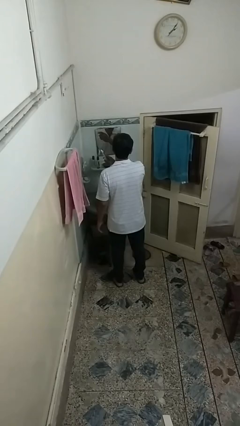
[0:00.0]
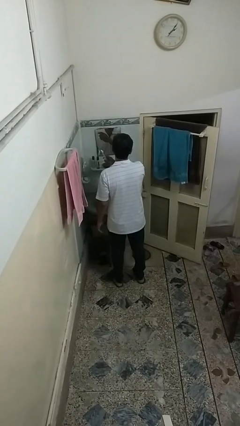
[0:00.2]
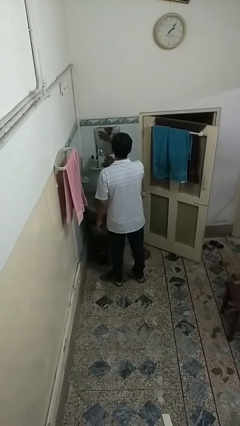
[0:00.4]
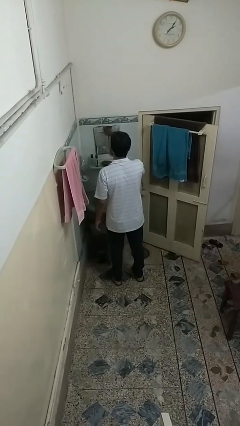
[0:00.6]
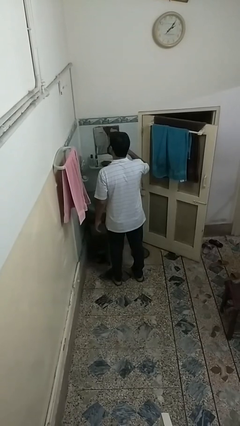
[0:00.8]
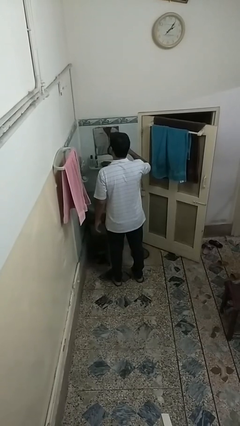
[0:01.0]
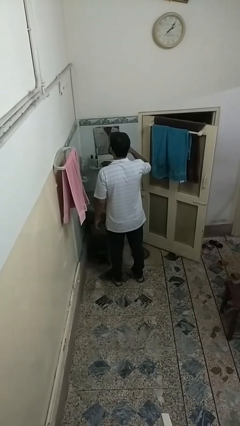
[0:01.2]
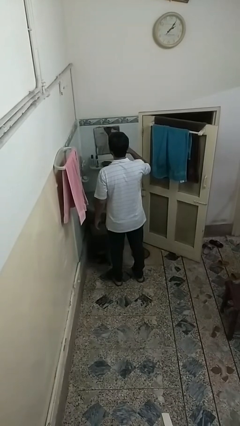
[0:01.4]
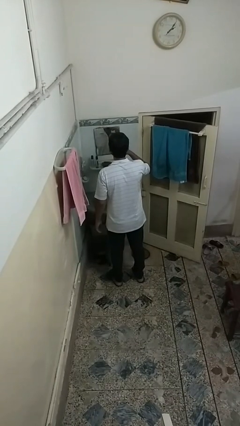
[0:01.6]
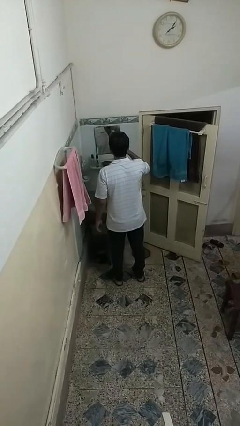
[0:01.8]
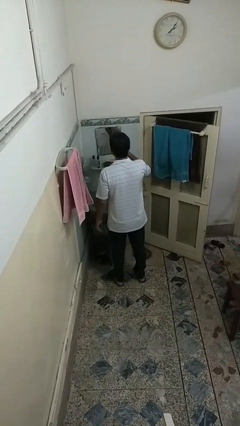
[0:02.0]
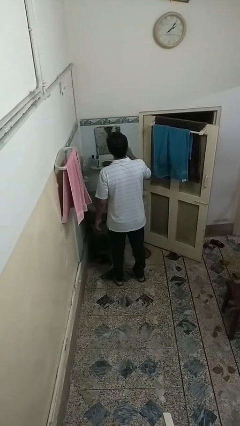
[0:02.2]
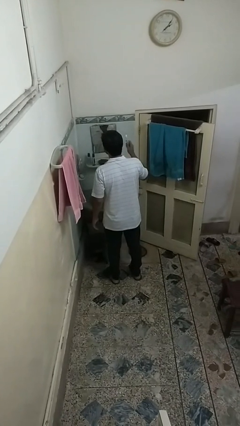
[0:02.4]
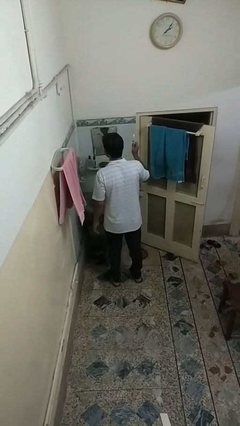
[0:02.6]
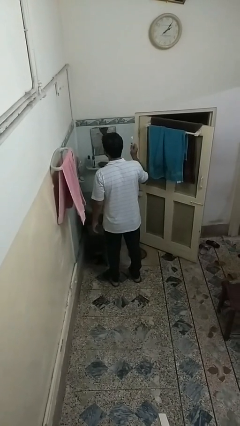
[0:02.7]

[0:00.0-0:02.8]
person brushes teeth

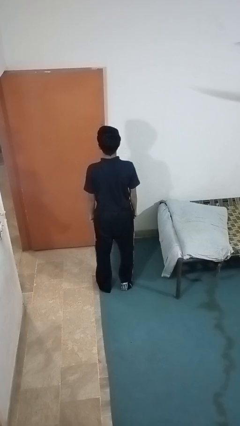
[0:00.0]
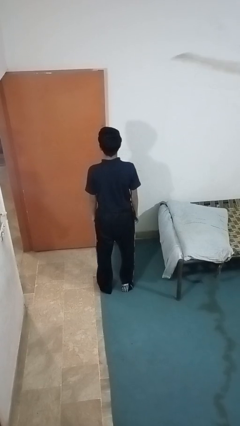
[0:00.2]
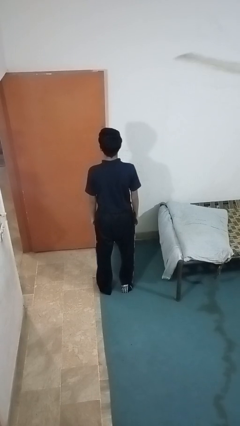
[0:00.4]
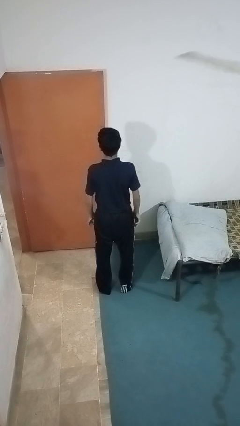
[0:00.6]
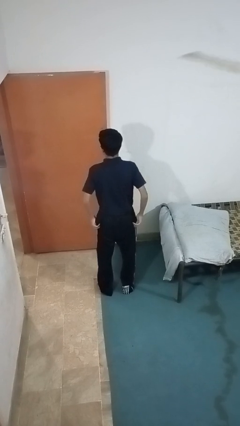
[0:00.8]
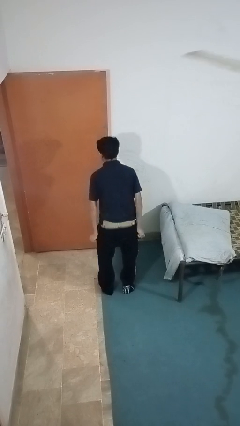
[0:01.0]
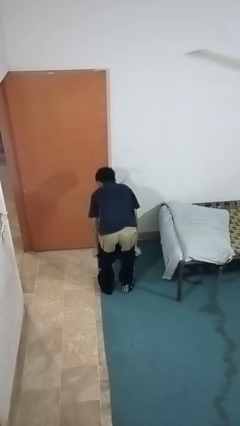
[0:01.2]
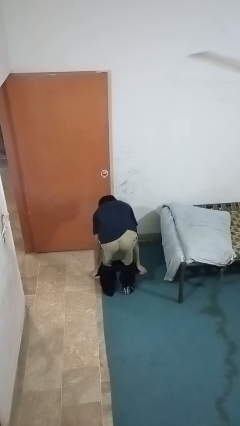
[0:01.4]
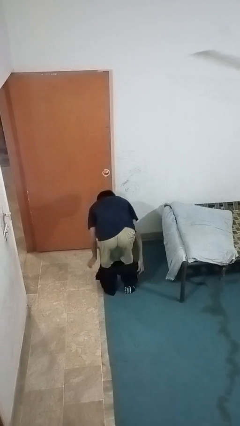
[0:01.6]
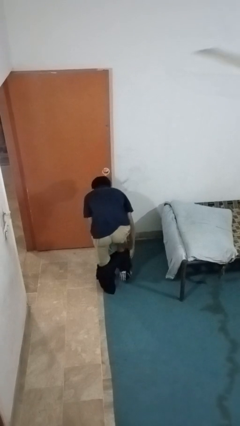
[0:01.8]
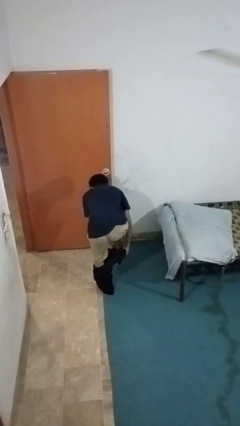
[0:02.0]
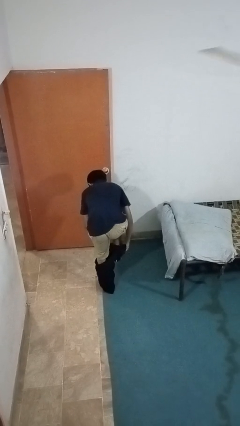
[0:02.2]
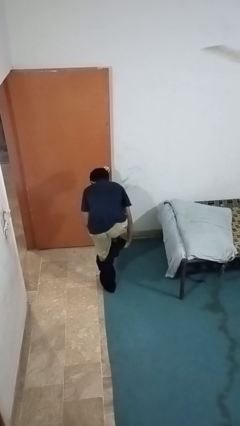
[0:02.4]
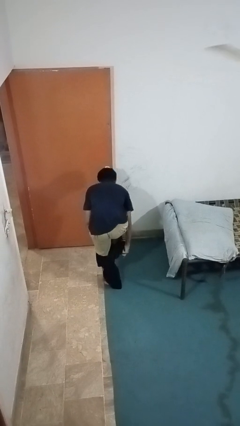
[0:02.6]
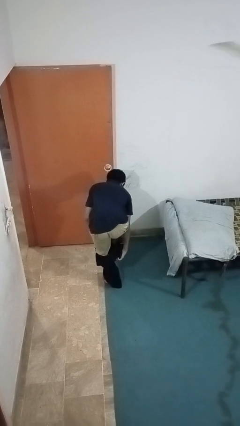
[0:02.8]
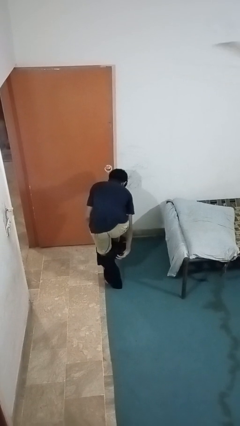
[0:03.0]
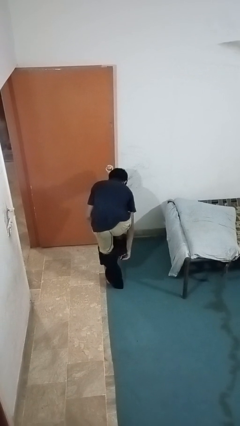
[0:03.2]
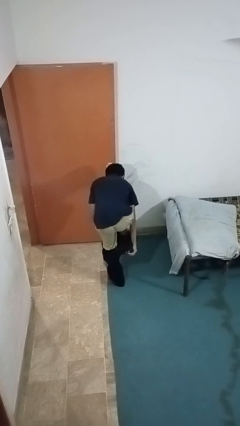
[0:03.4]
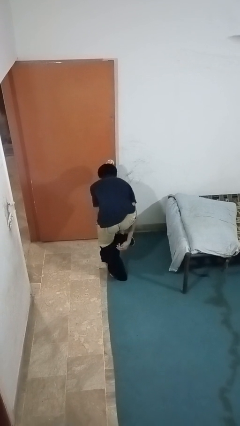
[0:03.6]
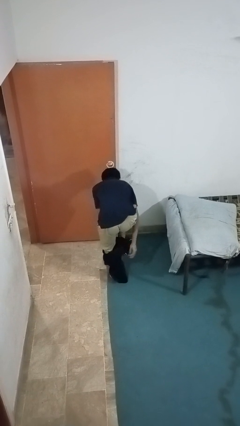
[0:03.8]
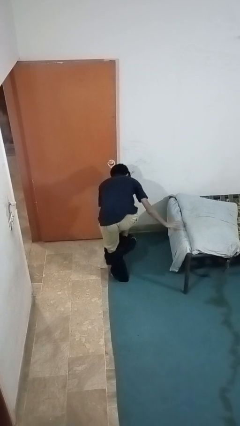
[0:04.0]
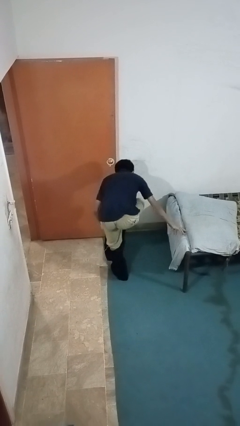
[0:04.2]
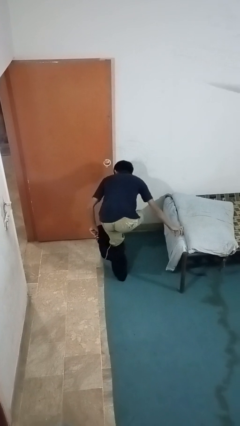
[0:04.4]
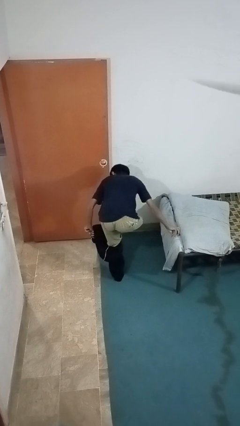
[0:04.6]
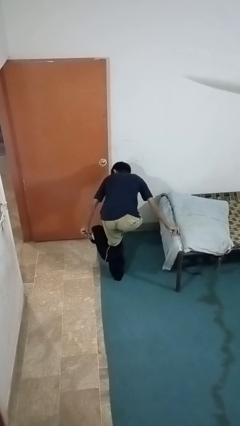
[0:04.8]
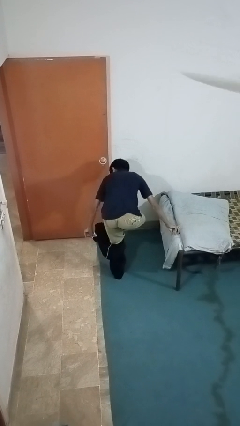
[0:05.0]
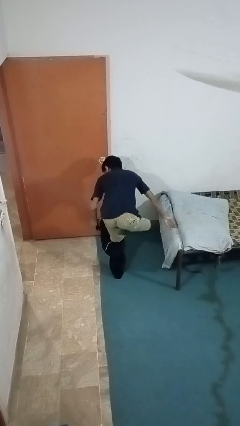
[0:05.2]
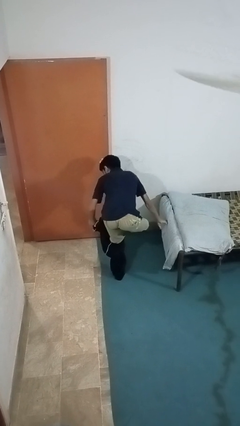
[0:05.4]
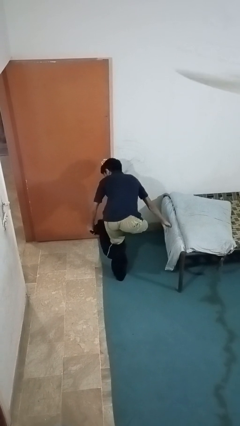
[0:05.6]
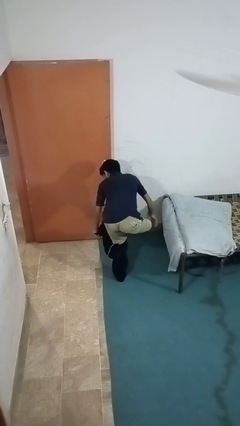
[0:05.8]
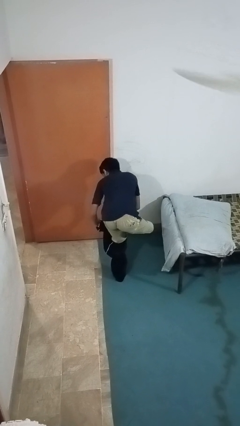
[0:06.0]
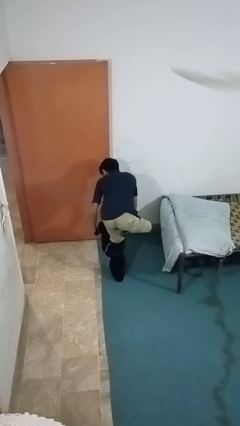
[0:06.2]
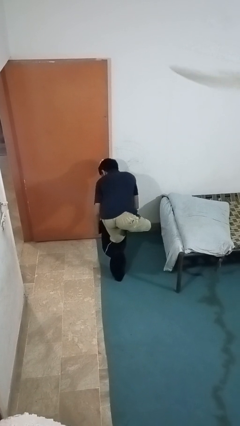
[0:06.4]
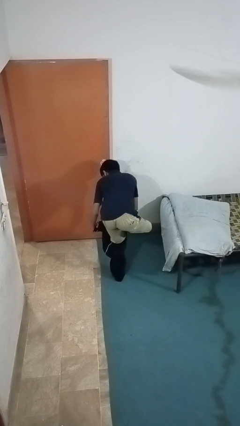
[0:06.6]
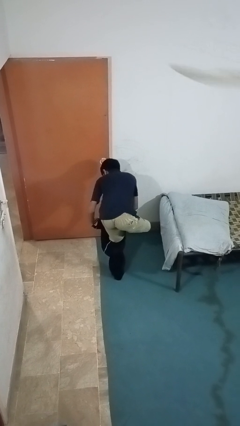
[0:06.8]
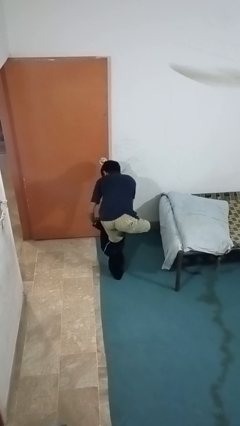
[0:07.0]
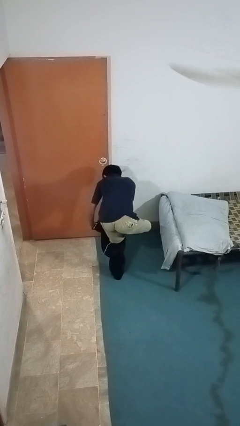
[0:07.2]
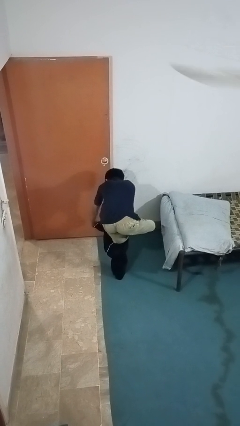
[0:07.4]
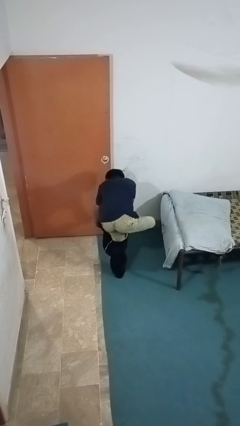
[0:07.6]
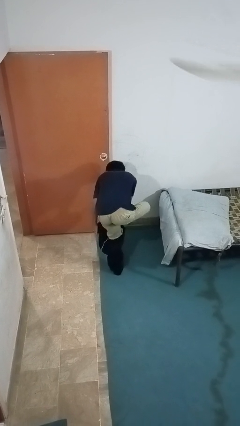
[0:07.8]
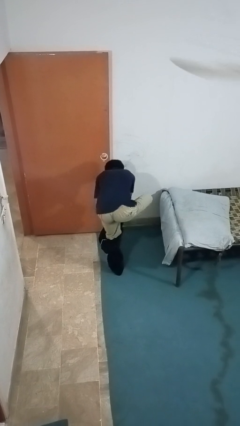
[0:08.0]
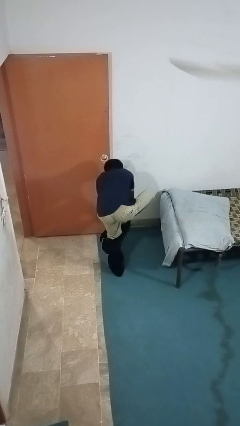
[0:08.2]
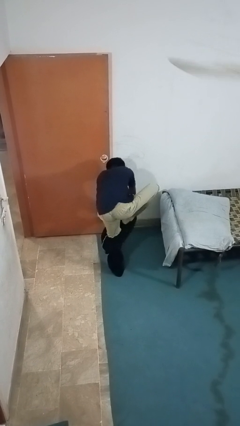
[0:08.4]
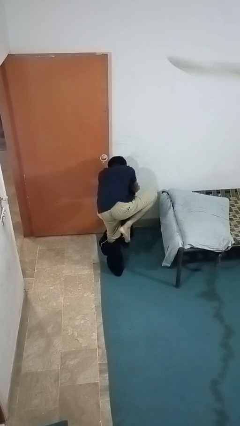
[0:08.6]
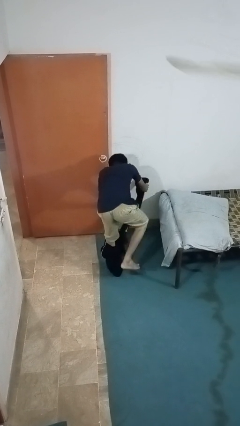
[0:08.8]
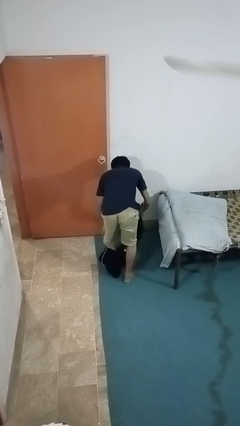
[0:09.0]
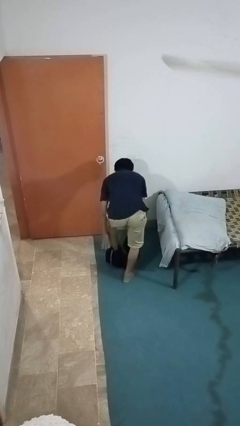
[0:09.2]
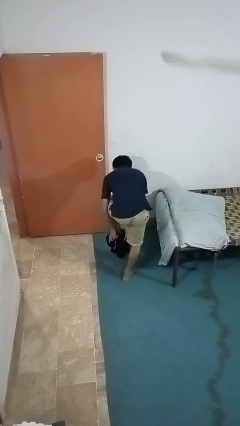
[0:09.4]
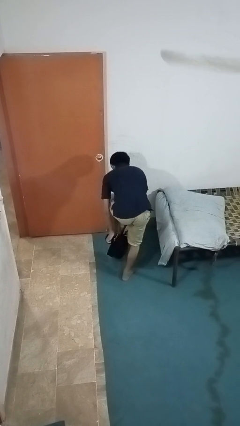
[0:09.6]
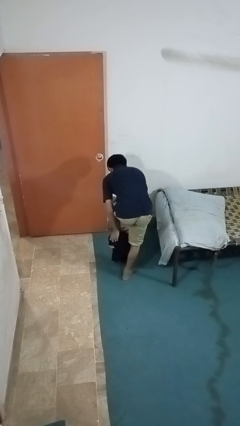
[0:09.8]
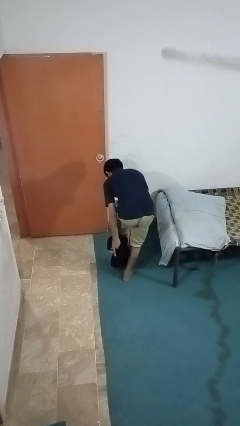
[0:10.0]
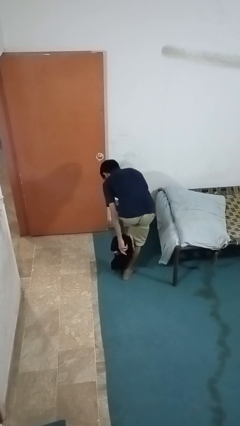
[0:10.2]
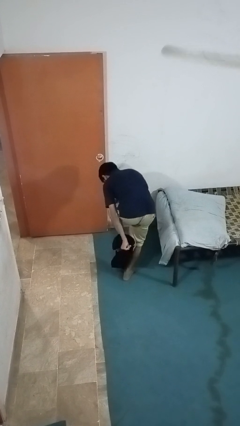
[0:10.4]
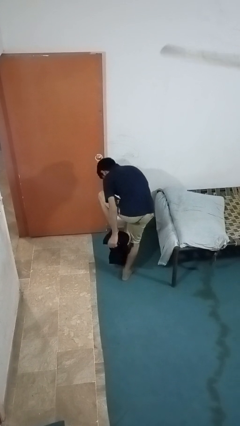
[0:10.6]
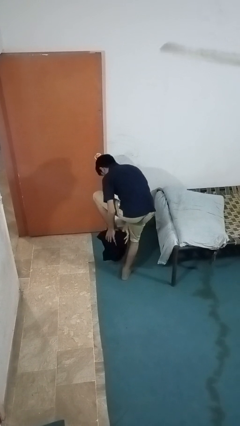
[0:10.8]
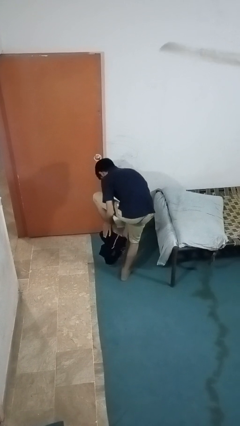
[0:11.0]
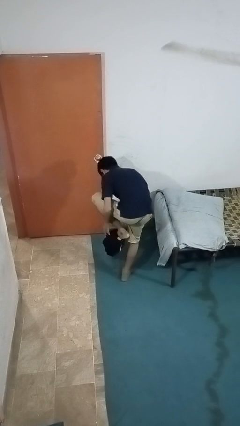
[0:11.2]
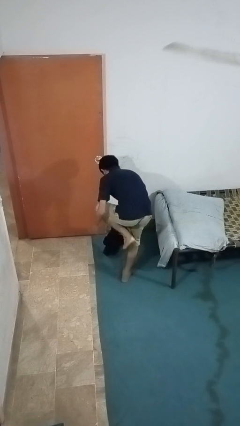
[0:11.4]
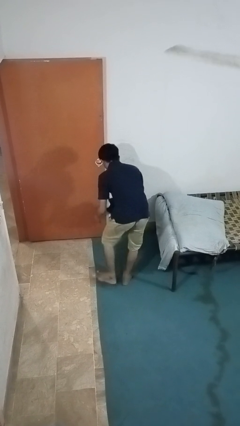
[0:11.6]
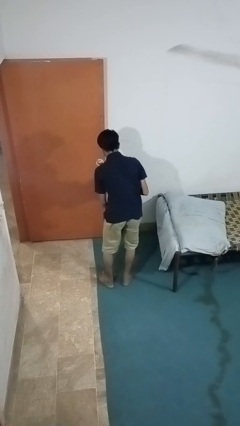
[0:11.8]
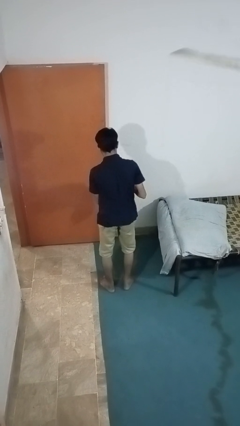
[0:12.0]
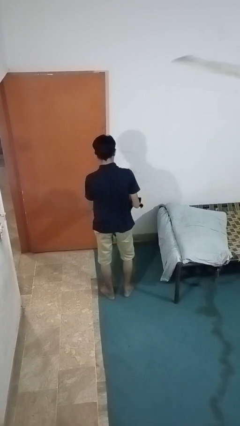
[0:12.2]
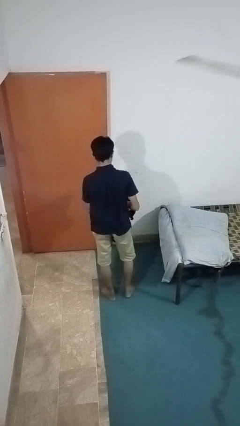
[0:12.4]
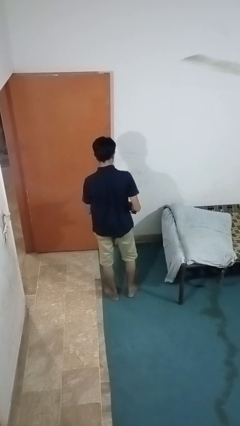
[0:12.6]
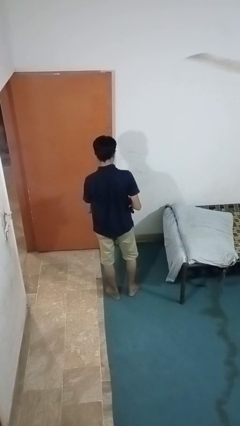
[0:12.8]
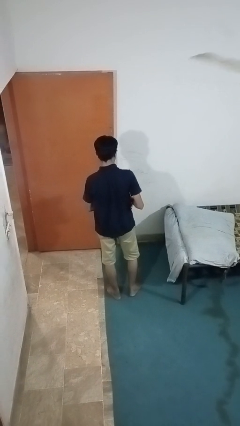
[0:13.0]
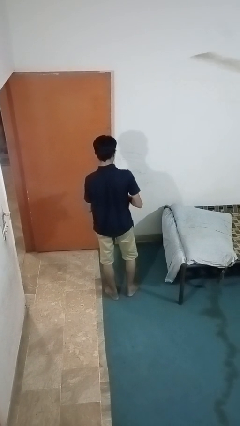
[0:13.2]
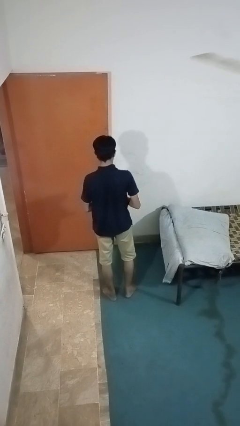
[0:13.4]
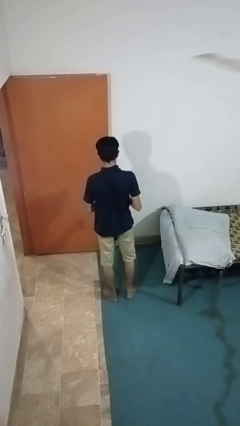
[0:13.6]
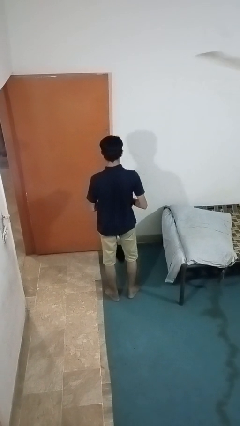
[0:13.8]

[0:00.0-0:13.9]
person takes off pants

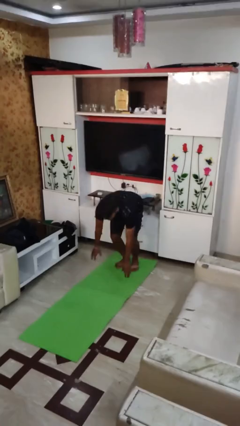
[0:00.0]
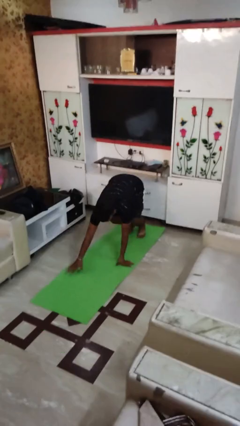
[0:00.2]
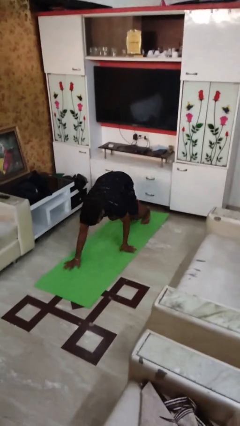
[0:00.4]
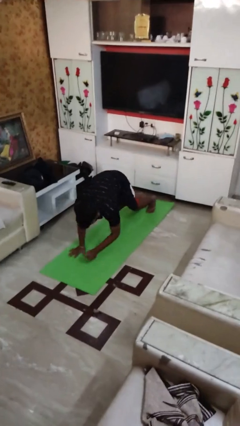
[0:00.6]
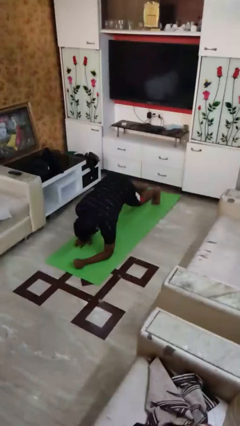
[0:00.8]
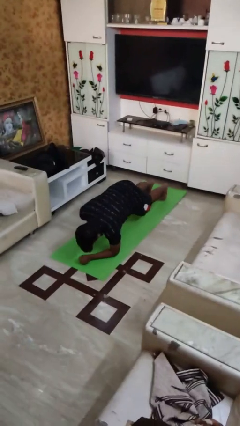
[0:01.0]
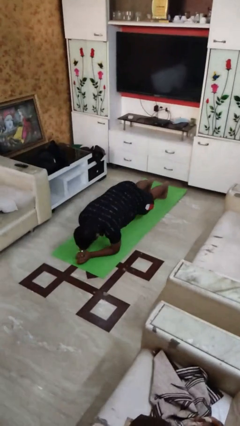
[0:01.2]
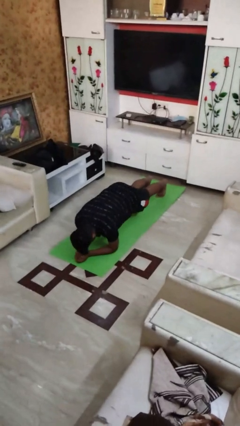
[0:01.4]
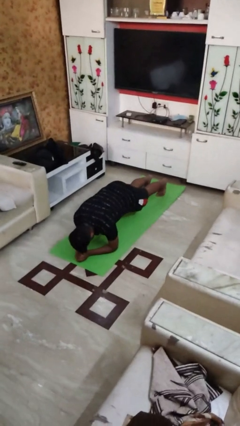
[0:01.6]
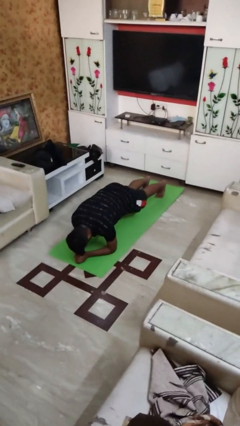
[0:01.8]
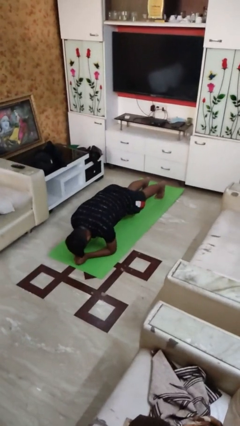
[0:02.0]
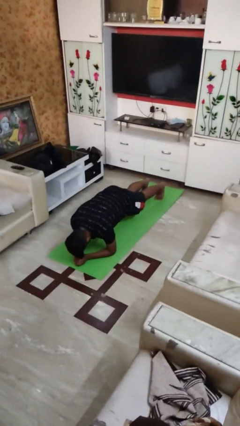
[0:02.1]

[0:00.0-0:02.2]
person exercises with plank
